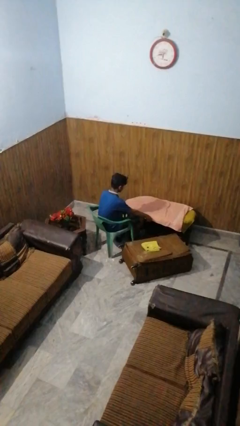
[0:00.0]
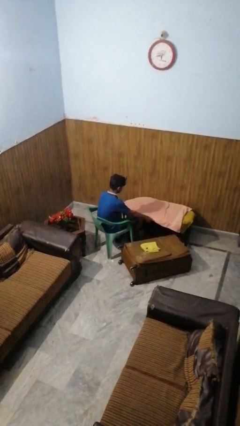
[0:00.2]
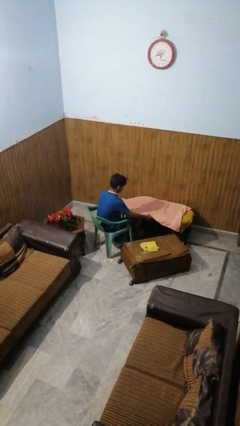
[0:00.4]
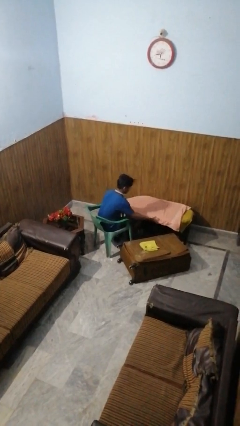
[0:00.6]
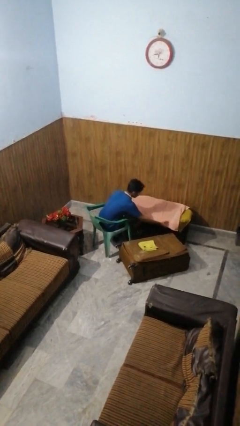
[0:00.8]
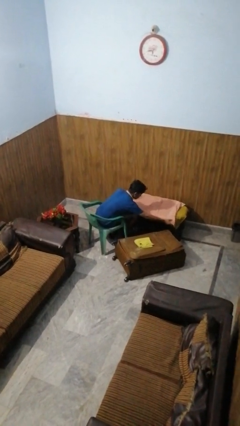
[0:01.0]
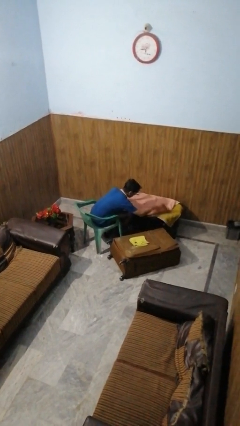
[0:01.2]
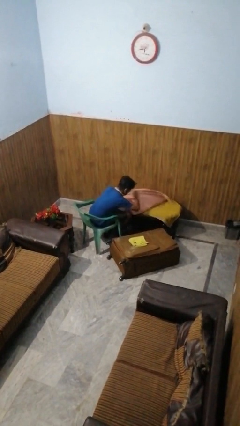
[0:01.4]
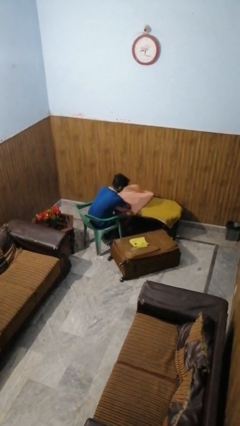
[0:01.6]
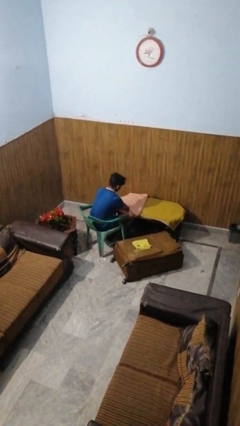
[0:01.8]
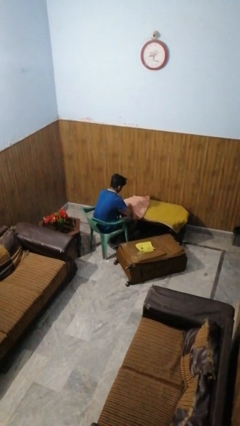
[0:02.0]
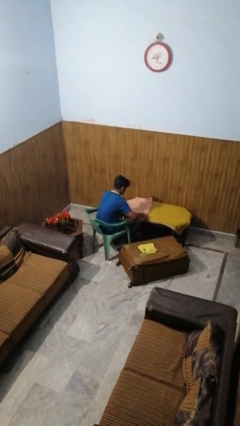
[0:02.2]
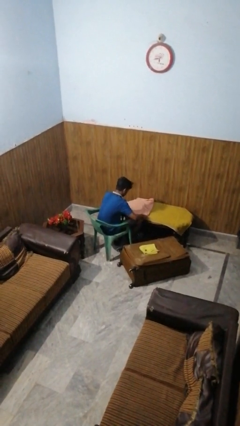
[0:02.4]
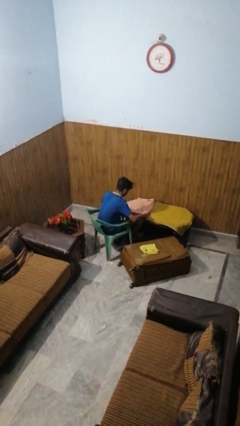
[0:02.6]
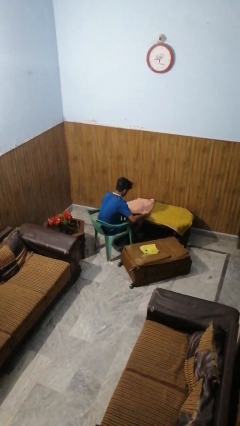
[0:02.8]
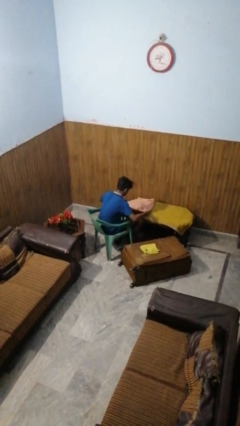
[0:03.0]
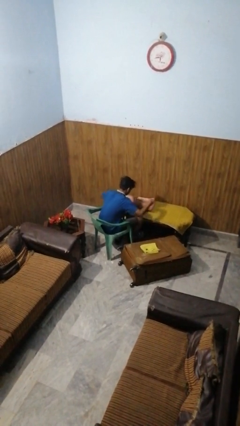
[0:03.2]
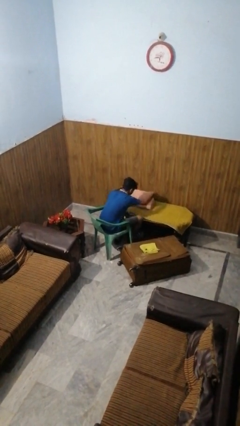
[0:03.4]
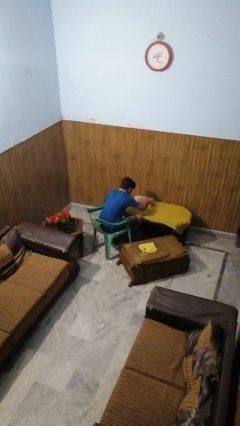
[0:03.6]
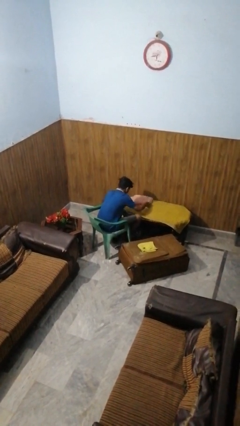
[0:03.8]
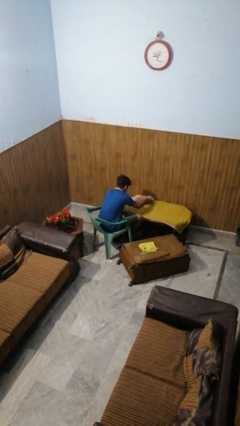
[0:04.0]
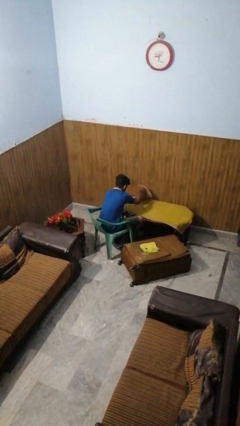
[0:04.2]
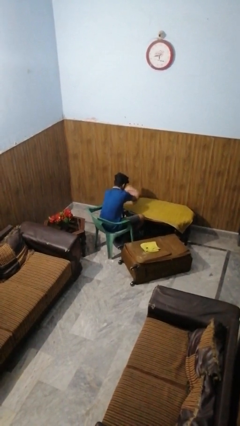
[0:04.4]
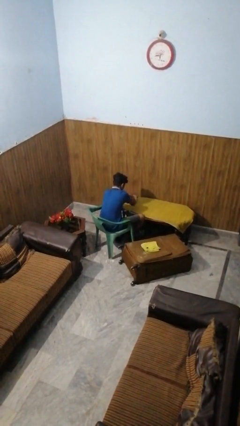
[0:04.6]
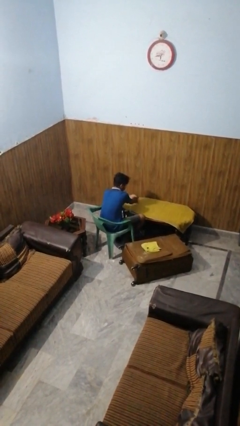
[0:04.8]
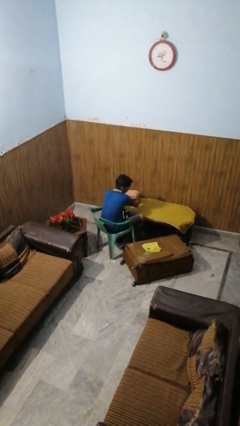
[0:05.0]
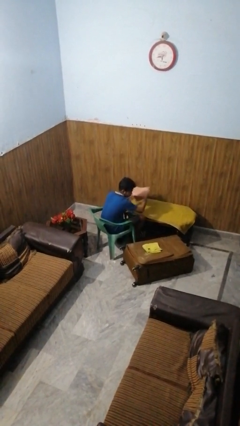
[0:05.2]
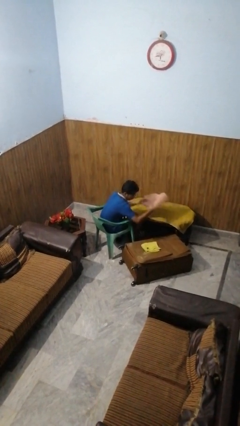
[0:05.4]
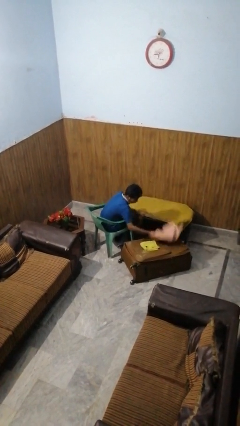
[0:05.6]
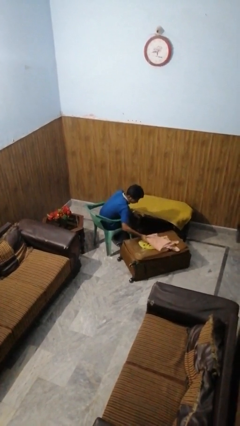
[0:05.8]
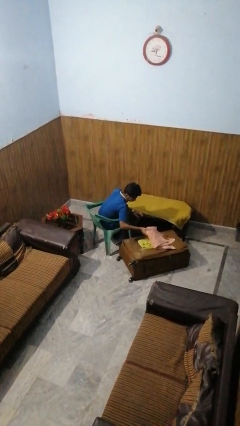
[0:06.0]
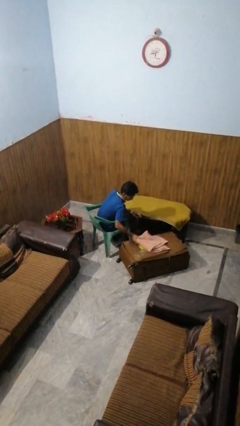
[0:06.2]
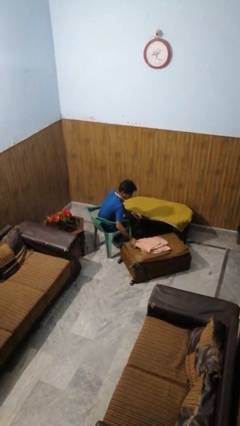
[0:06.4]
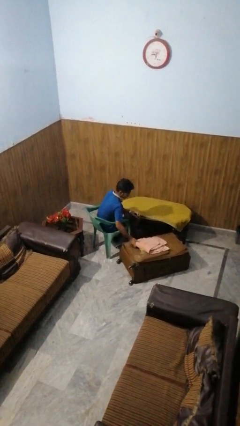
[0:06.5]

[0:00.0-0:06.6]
person folds towel

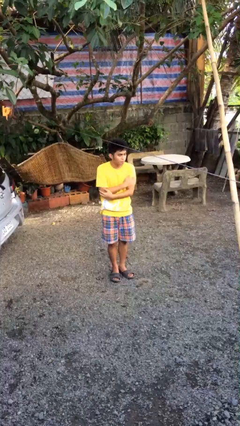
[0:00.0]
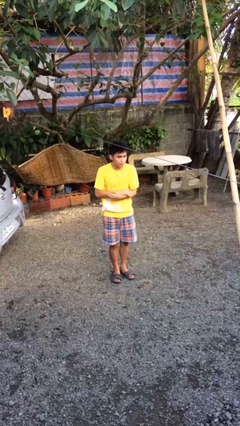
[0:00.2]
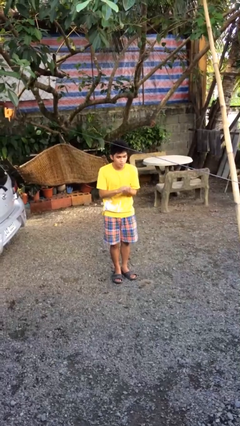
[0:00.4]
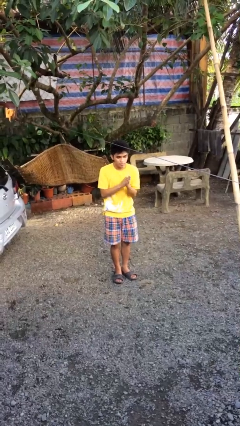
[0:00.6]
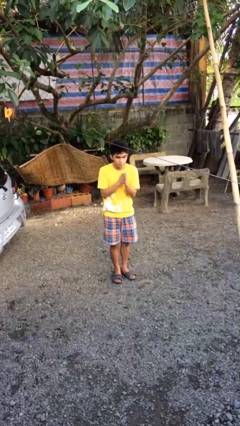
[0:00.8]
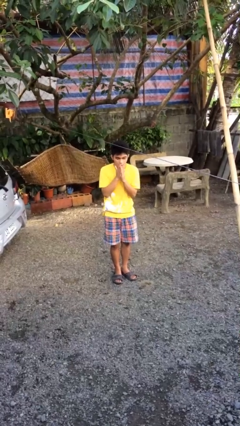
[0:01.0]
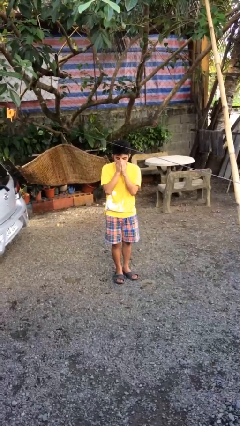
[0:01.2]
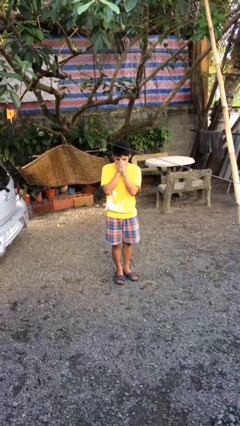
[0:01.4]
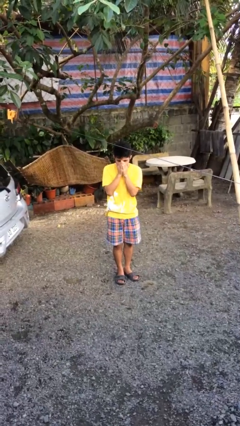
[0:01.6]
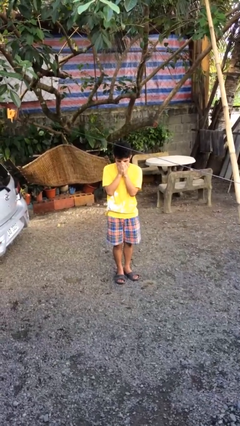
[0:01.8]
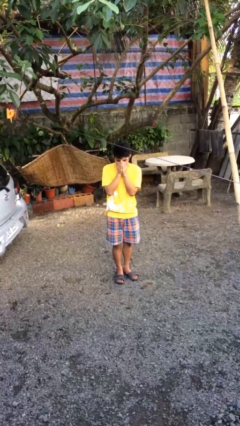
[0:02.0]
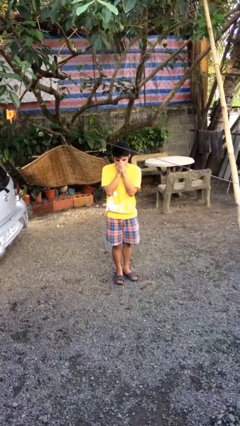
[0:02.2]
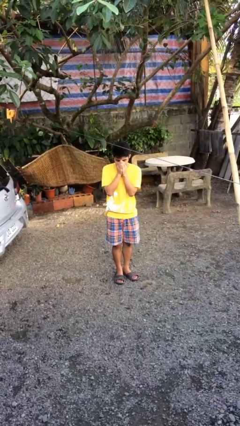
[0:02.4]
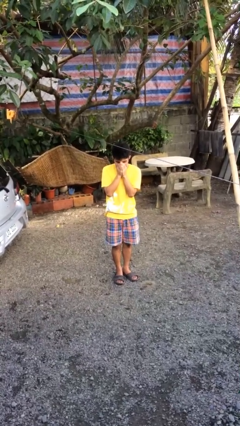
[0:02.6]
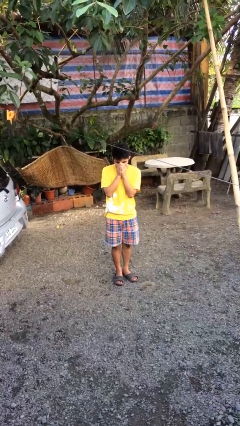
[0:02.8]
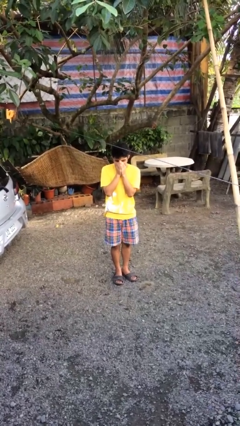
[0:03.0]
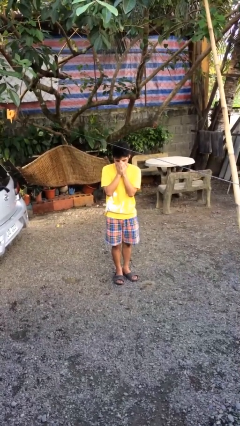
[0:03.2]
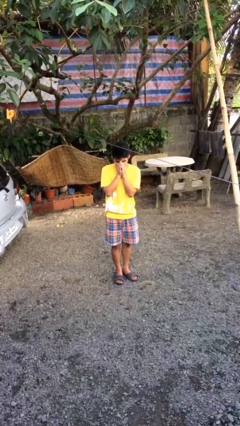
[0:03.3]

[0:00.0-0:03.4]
person blows into hands

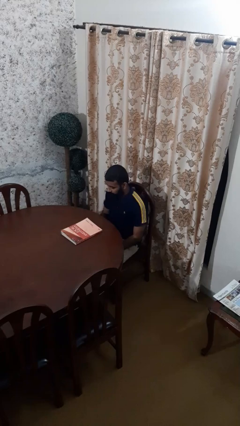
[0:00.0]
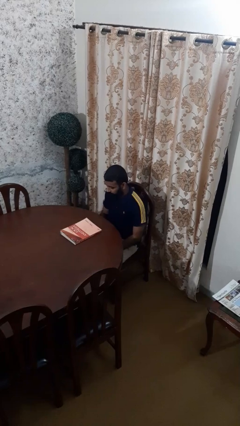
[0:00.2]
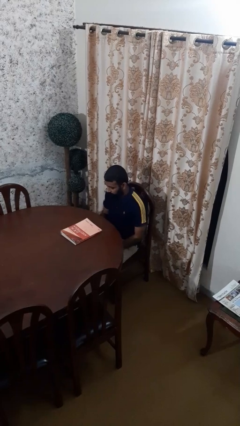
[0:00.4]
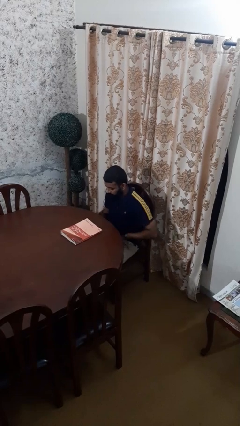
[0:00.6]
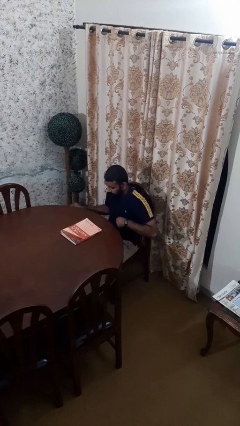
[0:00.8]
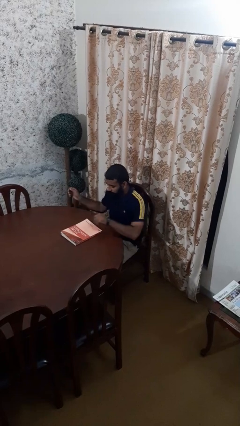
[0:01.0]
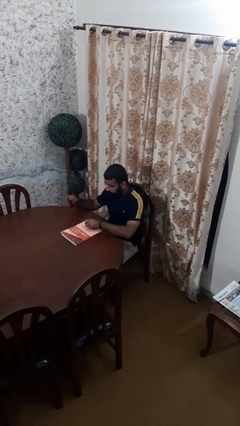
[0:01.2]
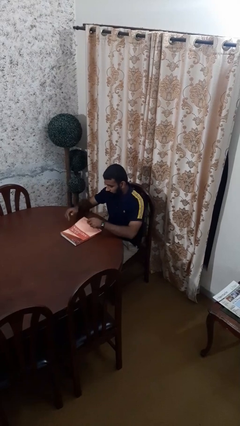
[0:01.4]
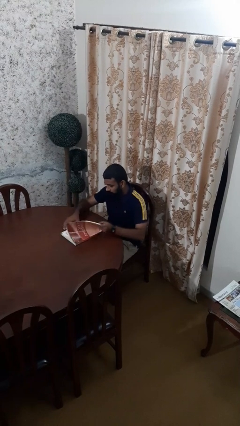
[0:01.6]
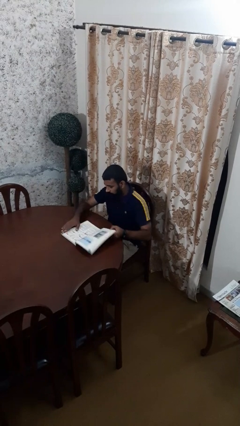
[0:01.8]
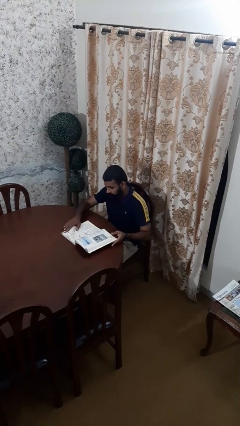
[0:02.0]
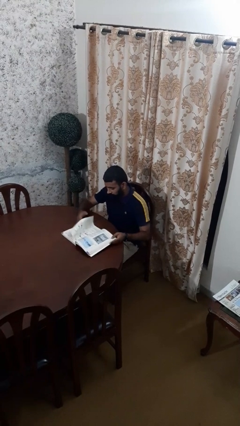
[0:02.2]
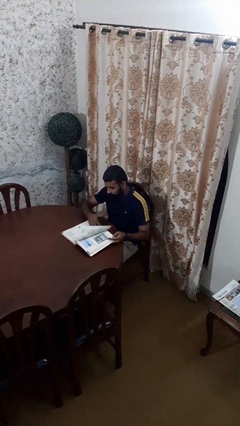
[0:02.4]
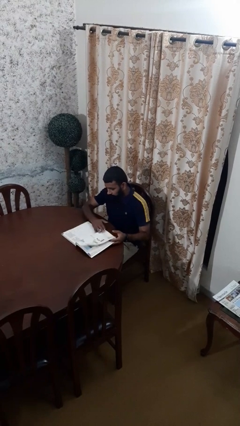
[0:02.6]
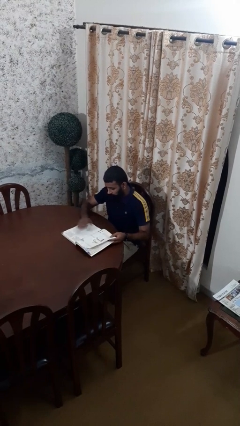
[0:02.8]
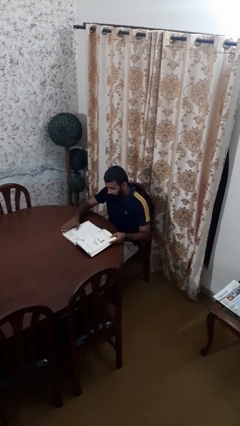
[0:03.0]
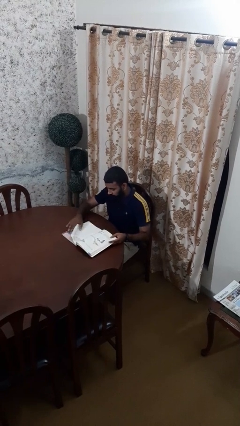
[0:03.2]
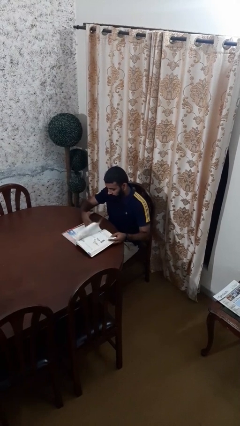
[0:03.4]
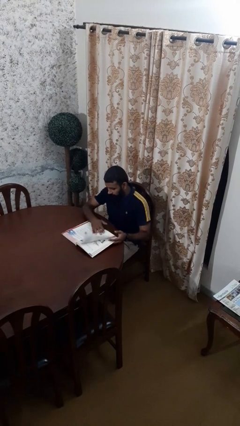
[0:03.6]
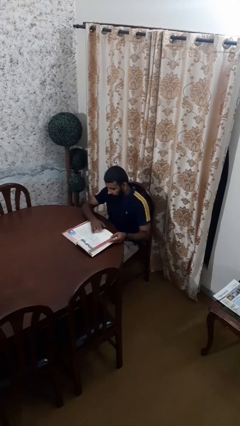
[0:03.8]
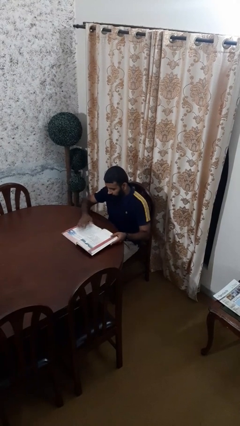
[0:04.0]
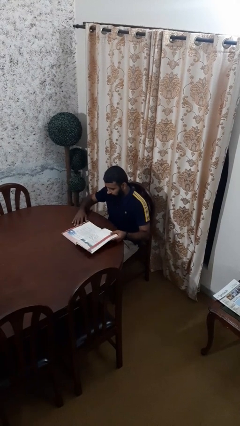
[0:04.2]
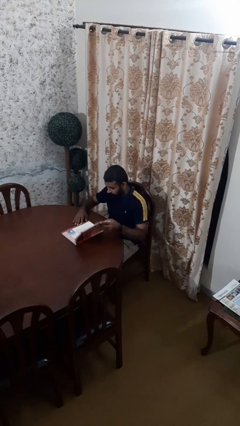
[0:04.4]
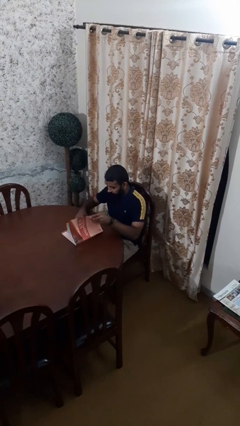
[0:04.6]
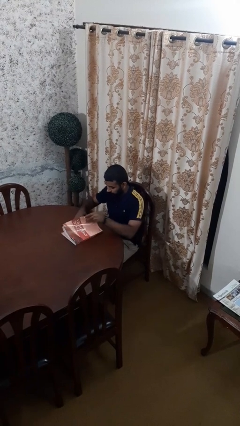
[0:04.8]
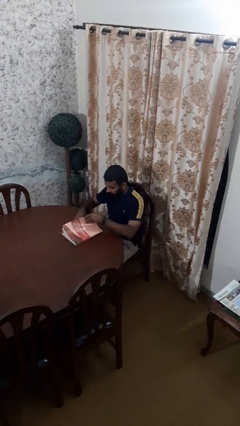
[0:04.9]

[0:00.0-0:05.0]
person reads book

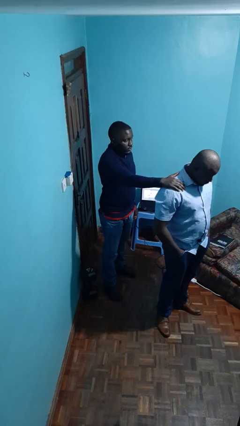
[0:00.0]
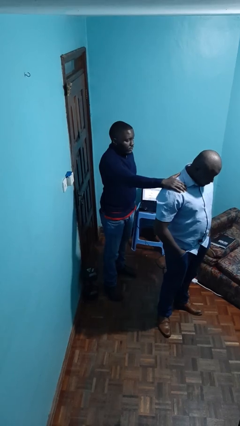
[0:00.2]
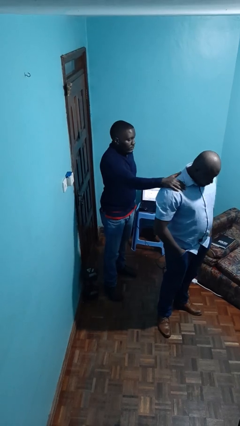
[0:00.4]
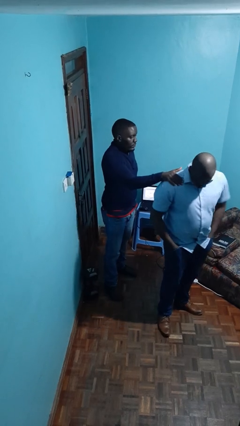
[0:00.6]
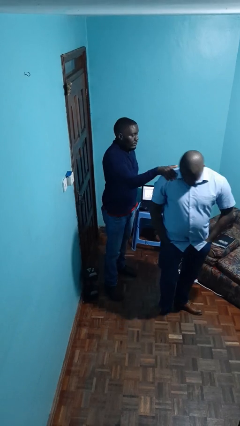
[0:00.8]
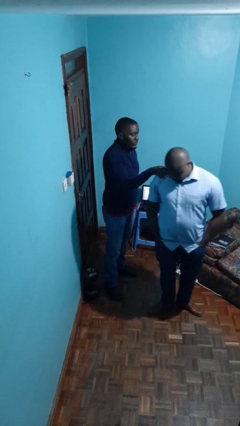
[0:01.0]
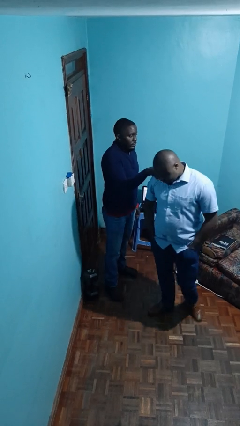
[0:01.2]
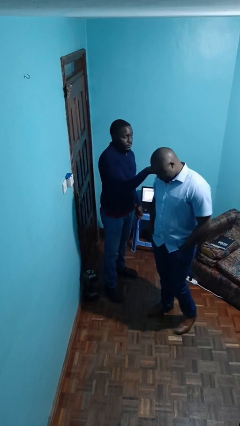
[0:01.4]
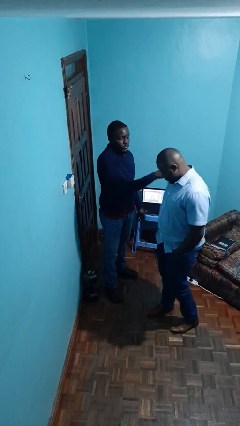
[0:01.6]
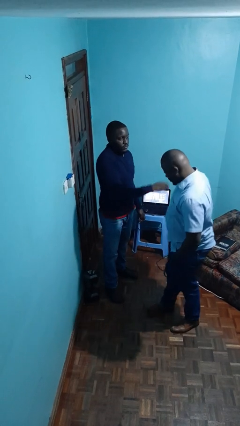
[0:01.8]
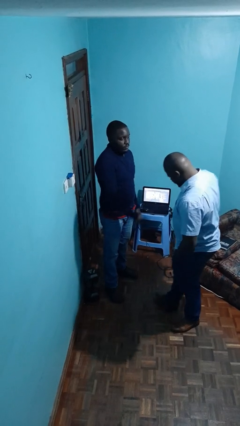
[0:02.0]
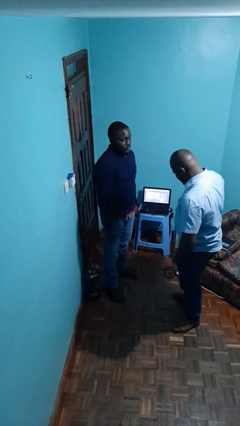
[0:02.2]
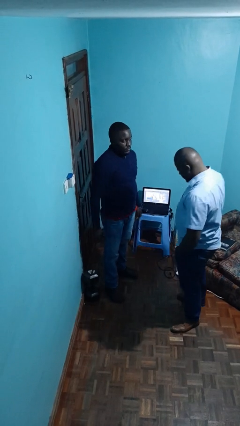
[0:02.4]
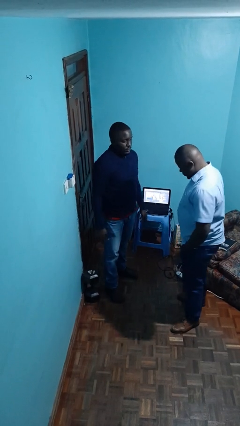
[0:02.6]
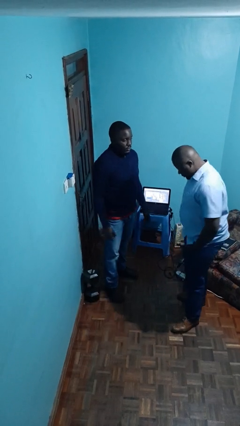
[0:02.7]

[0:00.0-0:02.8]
person spins person around

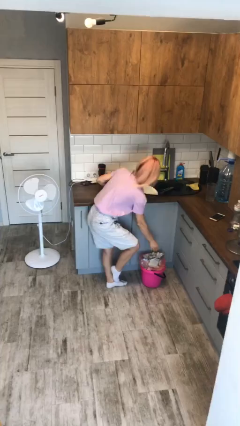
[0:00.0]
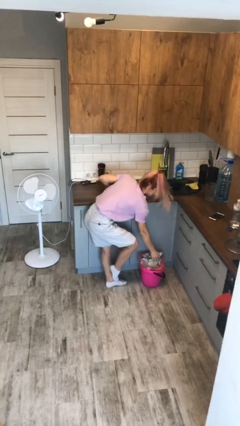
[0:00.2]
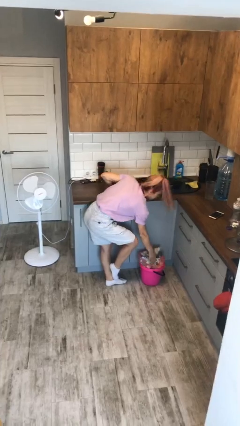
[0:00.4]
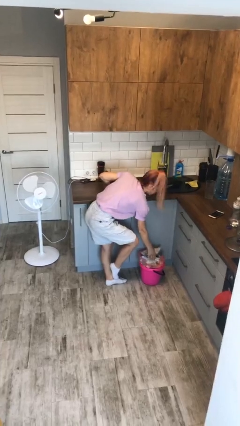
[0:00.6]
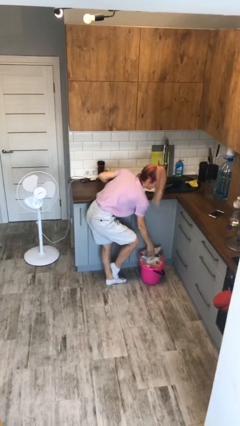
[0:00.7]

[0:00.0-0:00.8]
person discards trash
